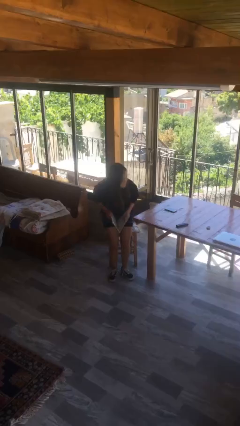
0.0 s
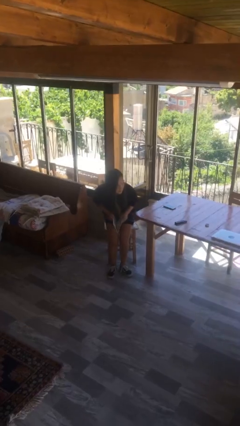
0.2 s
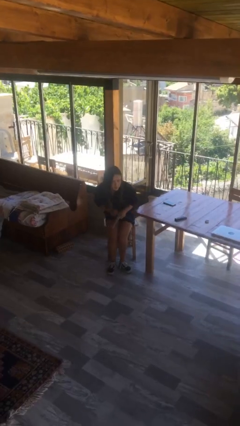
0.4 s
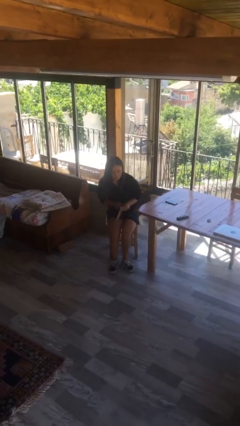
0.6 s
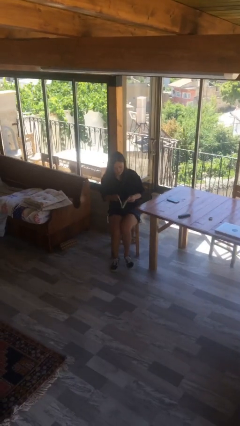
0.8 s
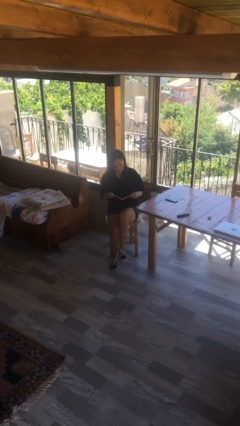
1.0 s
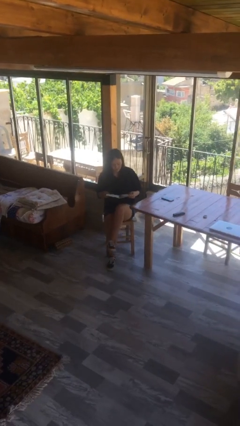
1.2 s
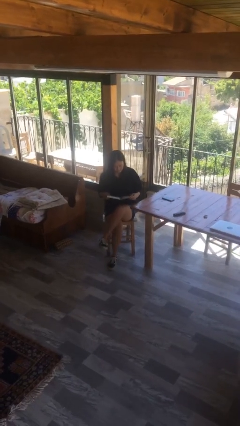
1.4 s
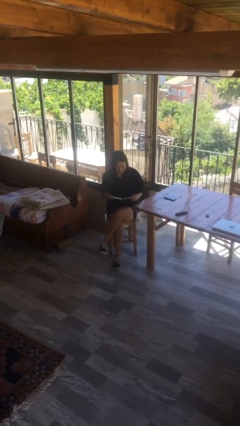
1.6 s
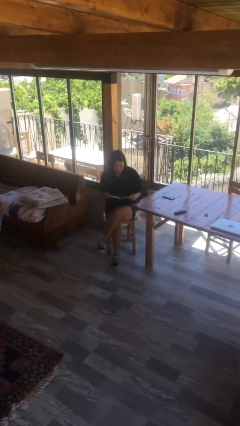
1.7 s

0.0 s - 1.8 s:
person sits down

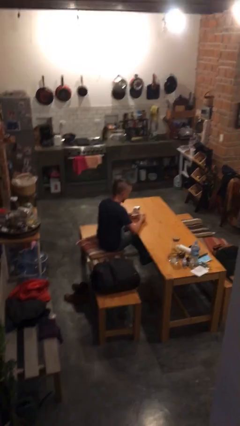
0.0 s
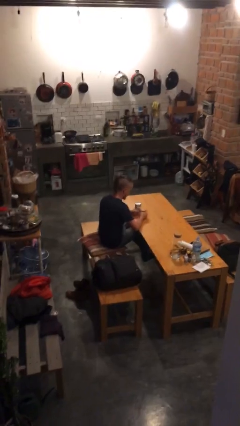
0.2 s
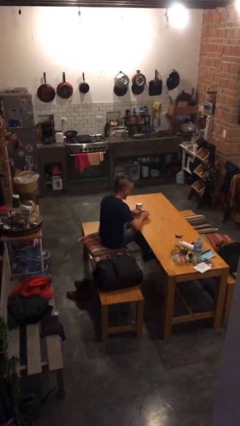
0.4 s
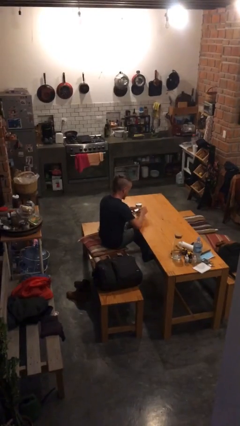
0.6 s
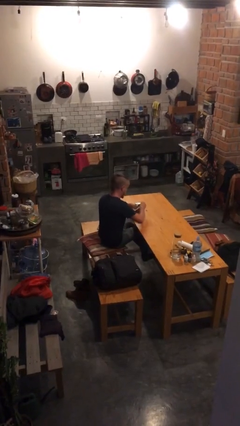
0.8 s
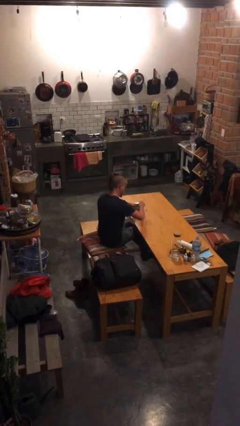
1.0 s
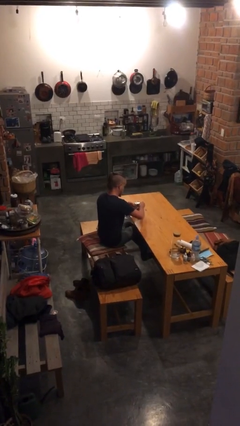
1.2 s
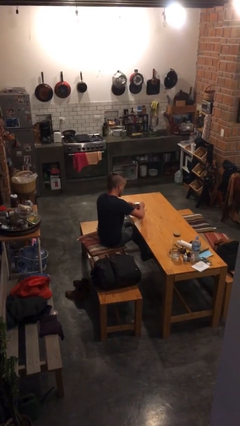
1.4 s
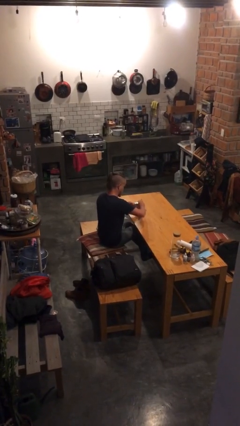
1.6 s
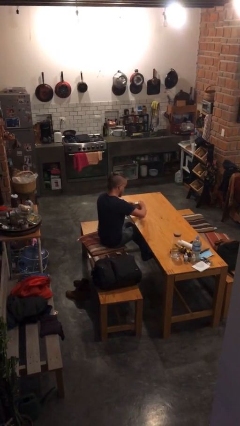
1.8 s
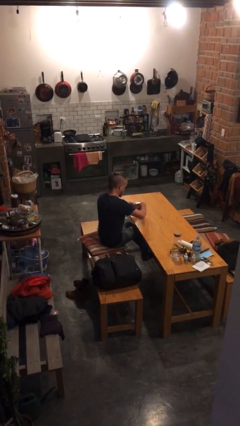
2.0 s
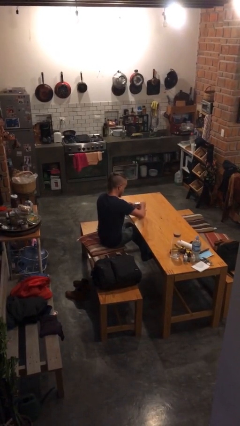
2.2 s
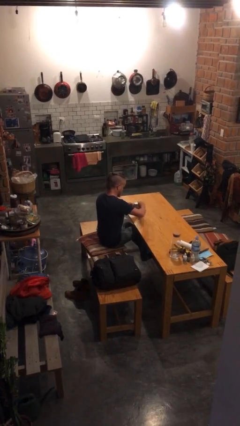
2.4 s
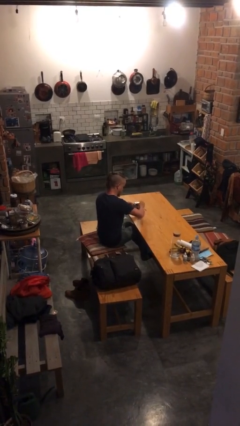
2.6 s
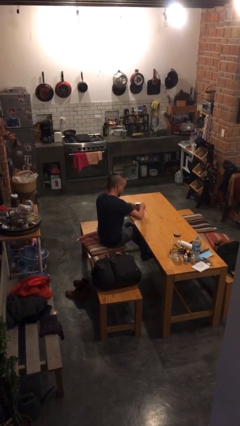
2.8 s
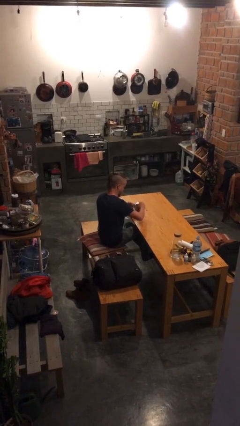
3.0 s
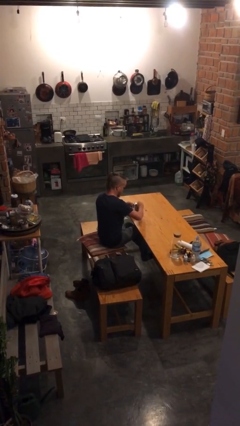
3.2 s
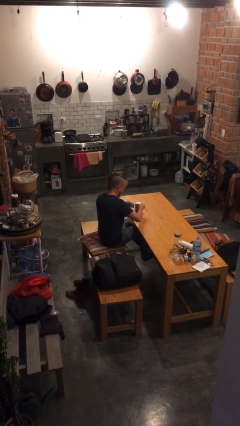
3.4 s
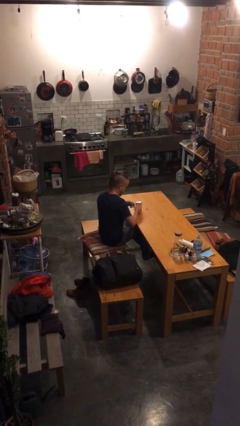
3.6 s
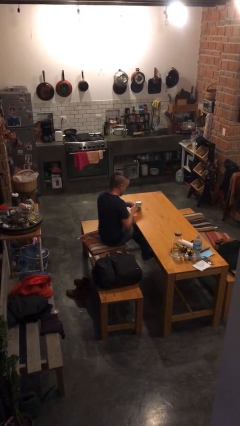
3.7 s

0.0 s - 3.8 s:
person opens can with can opener

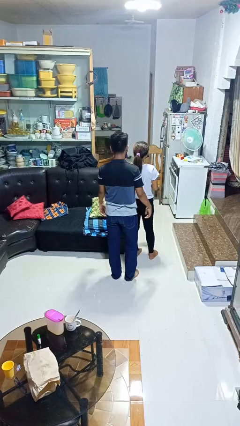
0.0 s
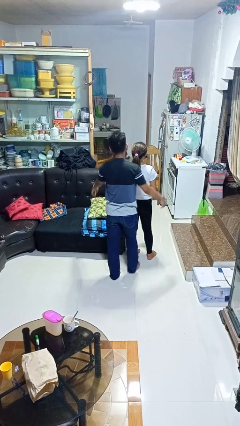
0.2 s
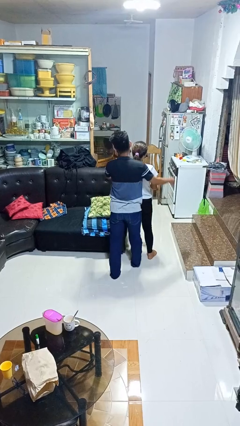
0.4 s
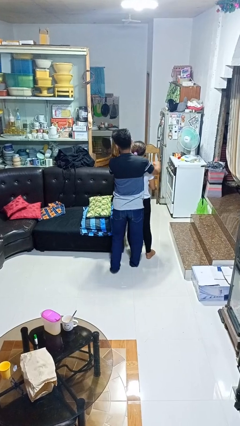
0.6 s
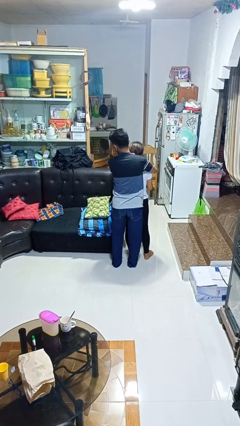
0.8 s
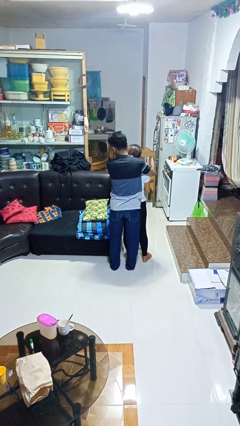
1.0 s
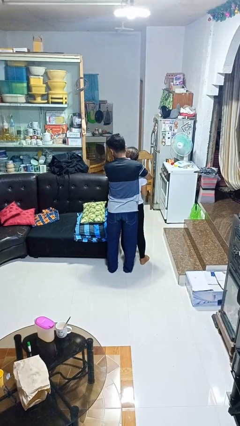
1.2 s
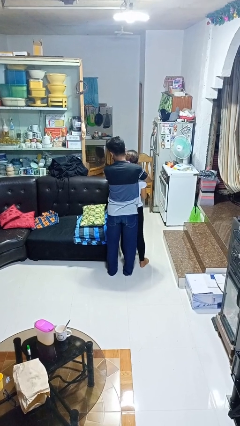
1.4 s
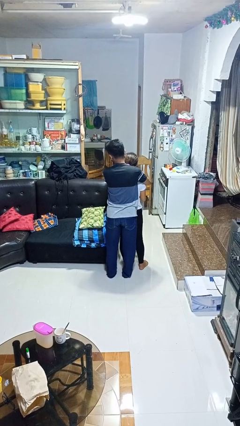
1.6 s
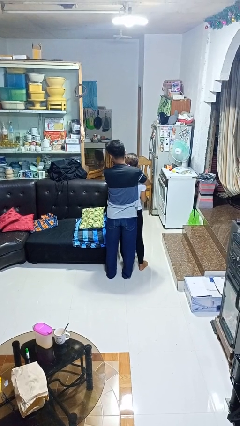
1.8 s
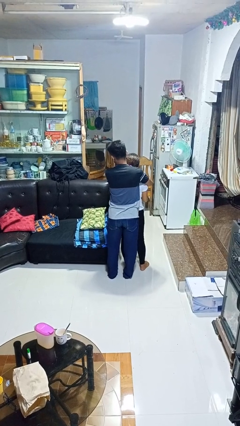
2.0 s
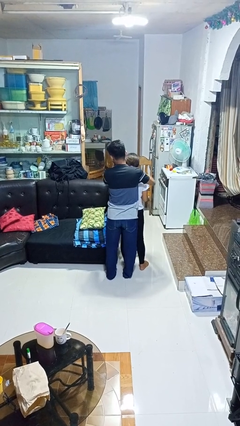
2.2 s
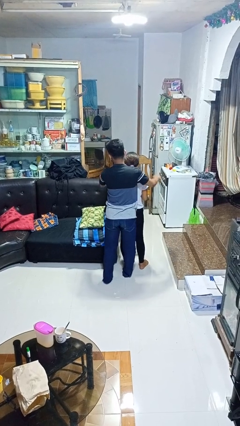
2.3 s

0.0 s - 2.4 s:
person hugs person from behind

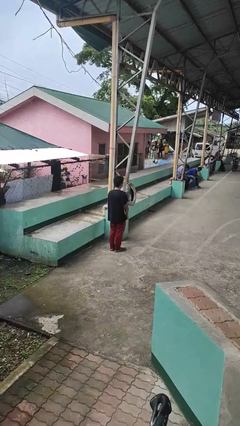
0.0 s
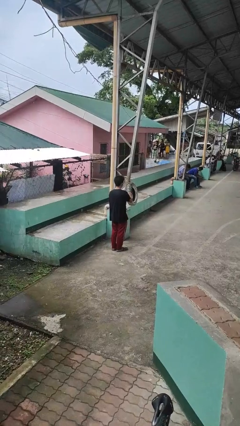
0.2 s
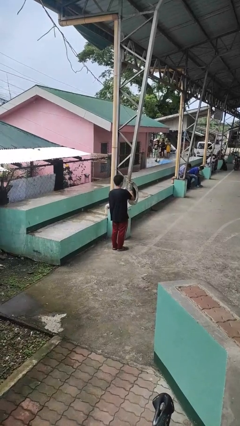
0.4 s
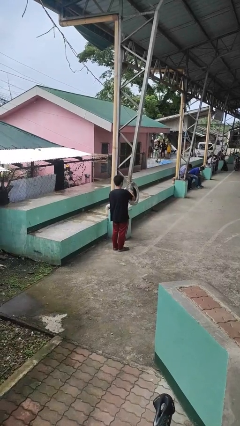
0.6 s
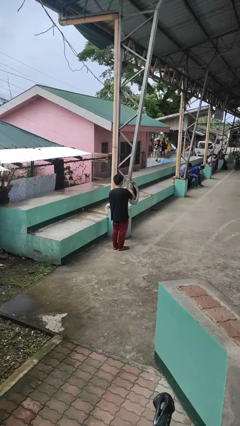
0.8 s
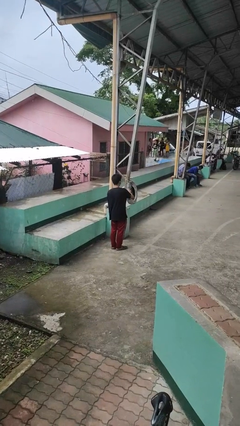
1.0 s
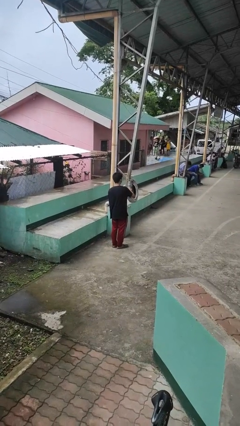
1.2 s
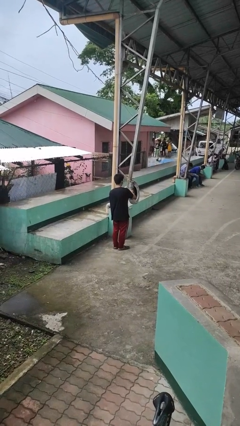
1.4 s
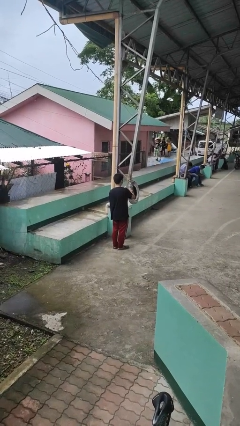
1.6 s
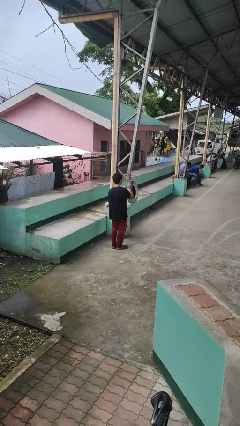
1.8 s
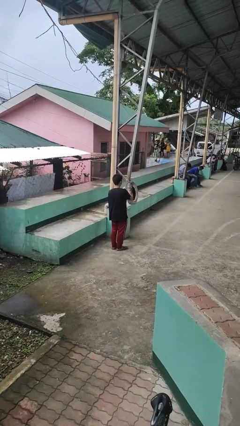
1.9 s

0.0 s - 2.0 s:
person taps object with finger

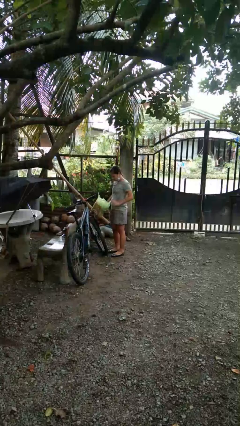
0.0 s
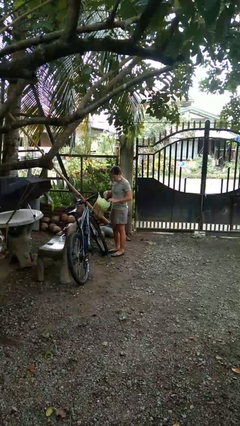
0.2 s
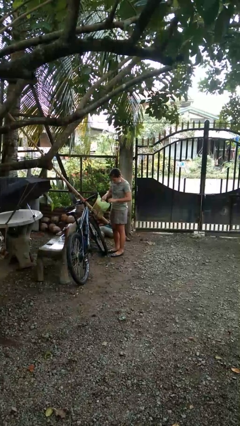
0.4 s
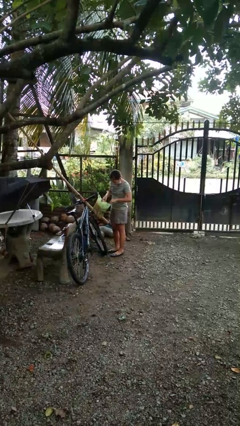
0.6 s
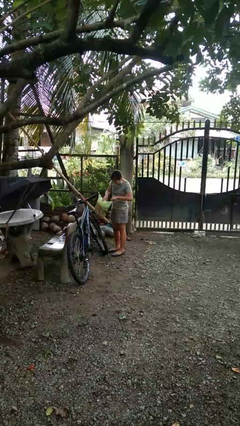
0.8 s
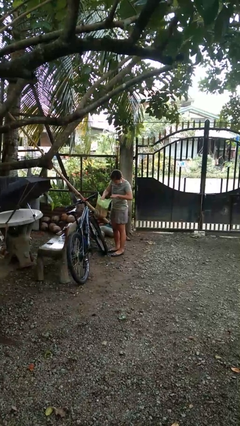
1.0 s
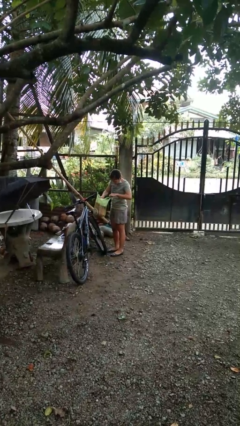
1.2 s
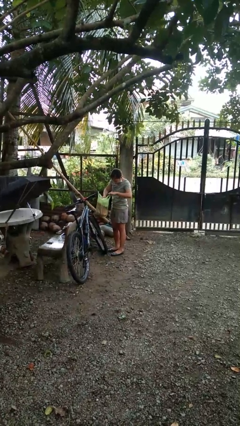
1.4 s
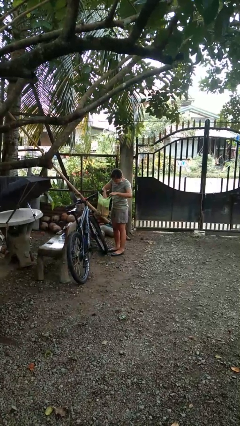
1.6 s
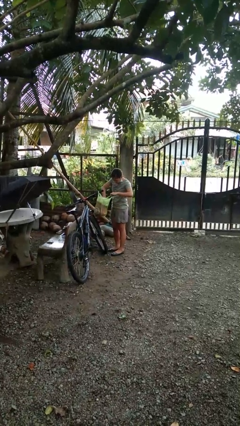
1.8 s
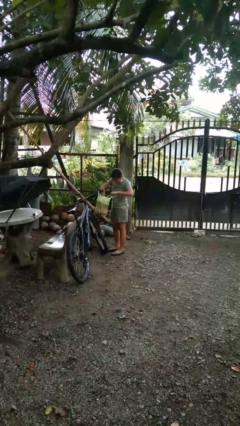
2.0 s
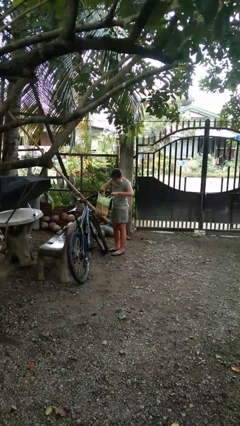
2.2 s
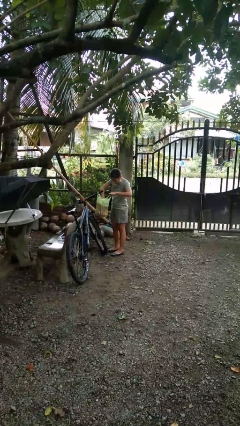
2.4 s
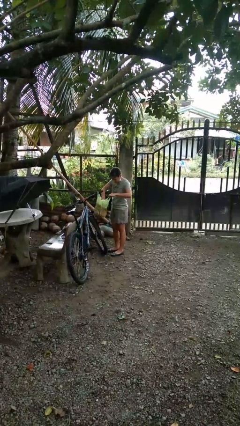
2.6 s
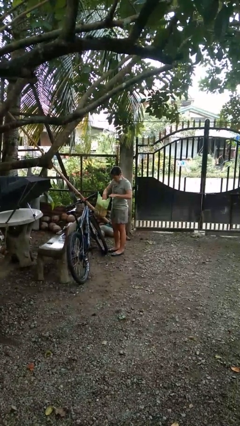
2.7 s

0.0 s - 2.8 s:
person searches in bag

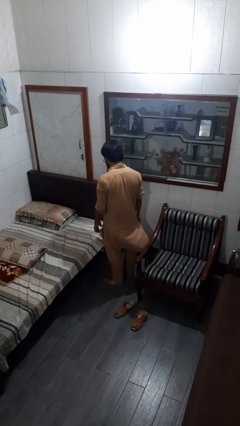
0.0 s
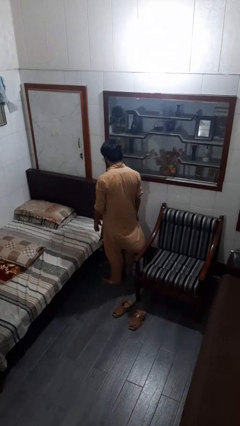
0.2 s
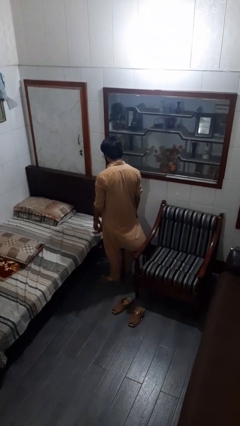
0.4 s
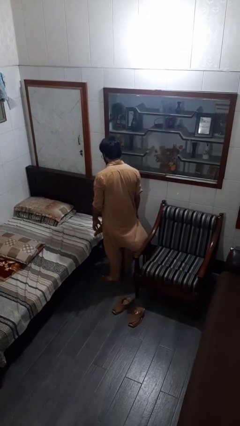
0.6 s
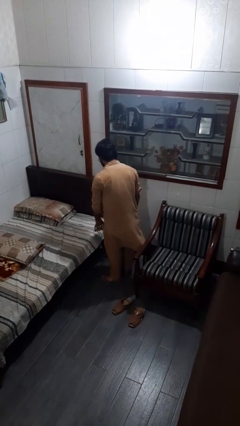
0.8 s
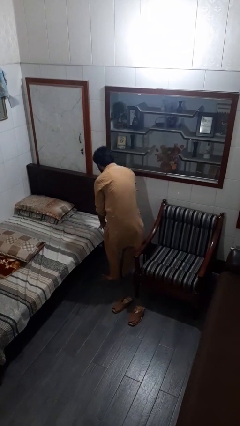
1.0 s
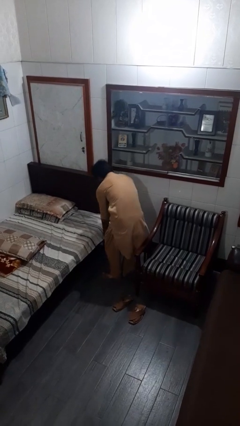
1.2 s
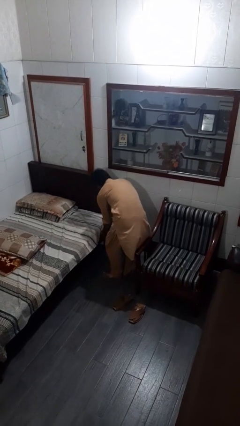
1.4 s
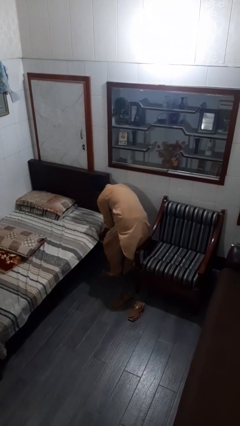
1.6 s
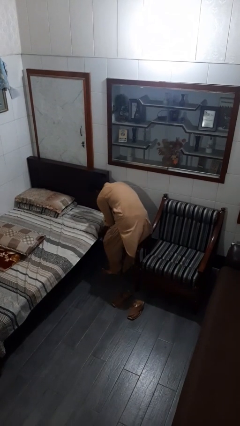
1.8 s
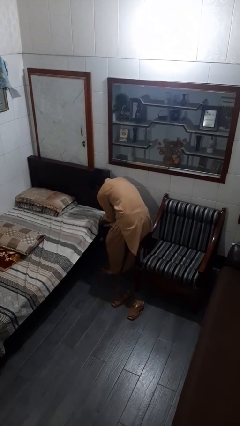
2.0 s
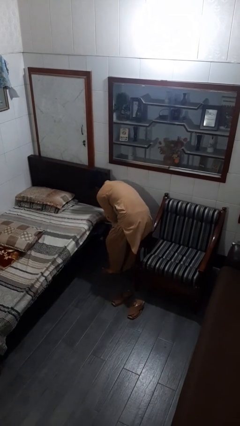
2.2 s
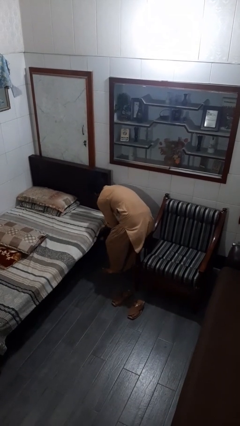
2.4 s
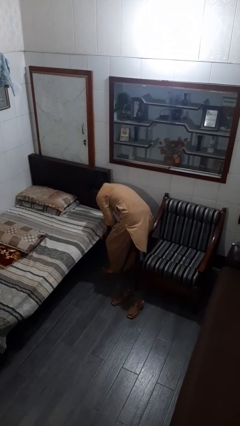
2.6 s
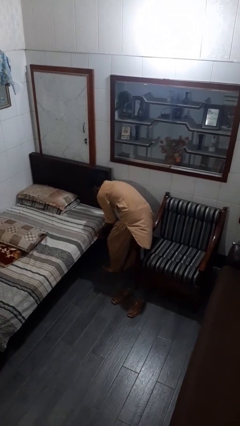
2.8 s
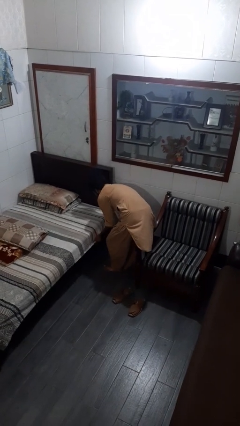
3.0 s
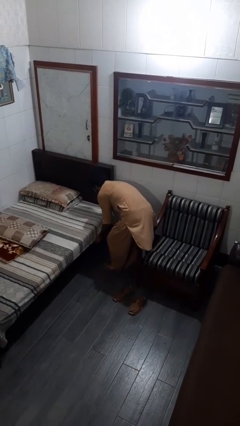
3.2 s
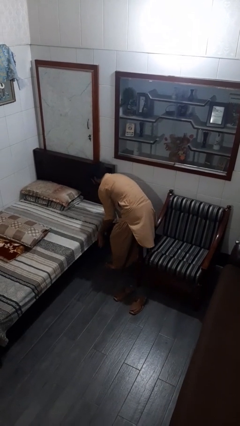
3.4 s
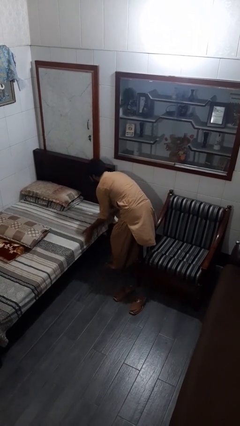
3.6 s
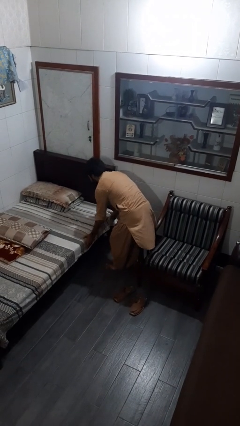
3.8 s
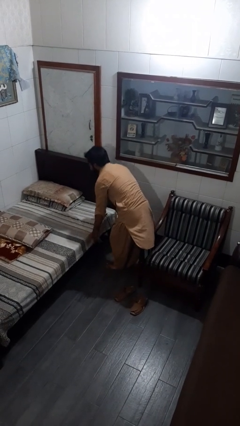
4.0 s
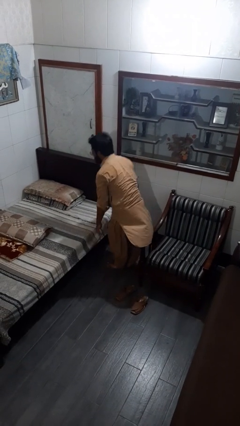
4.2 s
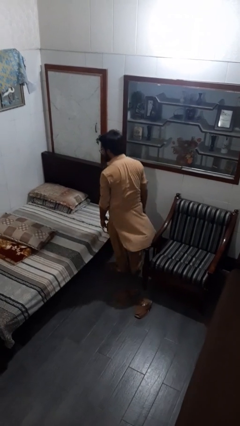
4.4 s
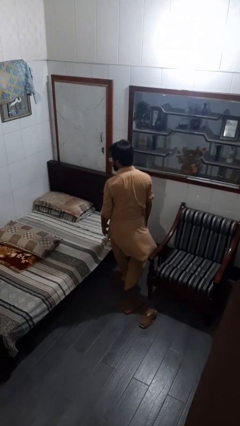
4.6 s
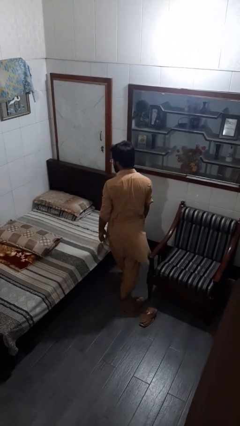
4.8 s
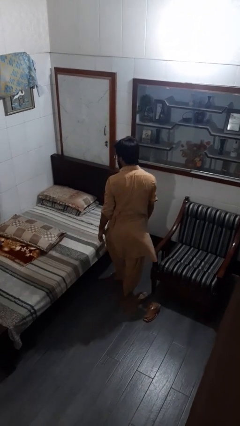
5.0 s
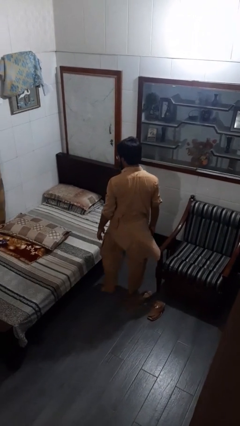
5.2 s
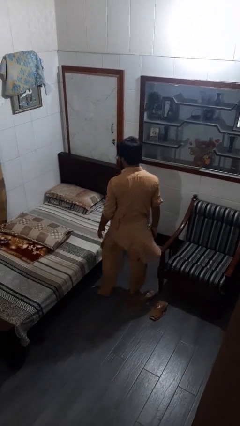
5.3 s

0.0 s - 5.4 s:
person makes bed
